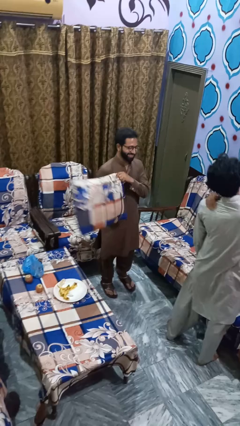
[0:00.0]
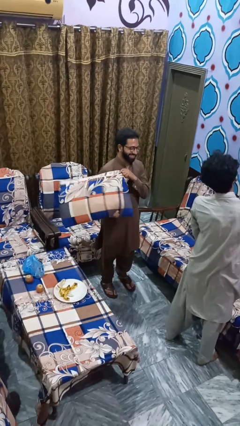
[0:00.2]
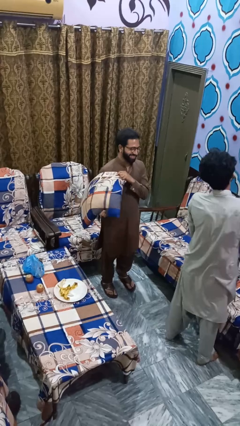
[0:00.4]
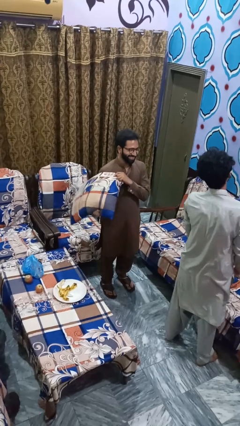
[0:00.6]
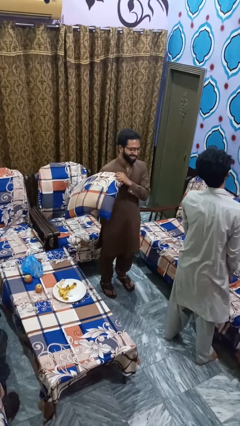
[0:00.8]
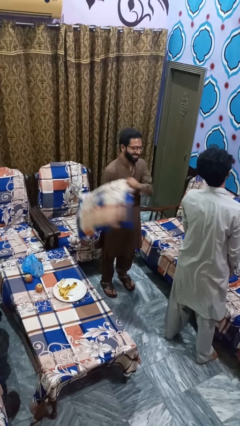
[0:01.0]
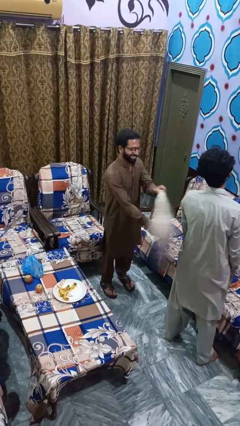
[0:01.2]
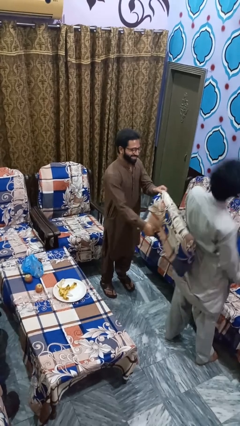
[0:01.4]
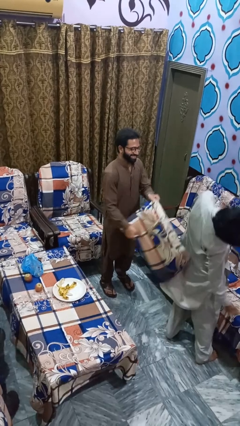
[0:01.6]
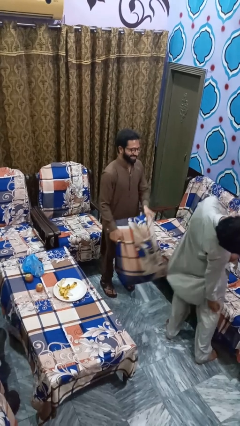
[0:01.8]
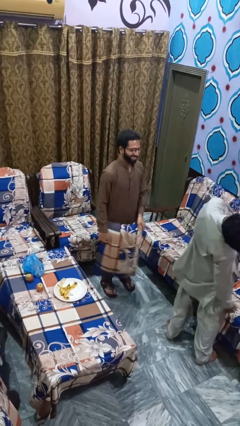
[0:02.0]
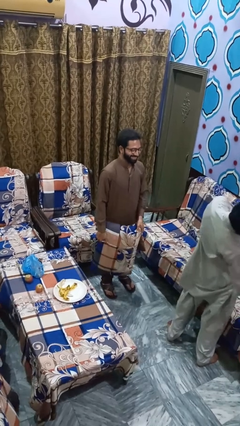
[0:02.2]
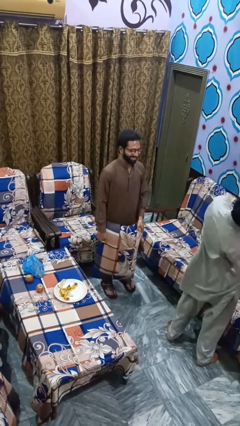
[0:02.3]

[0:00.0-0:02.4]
person hits person with pillow

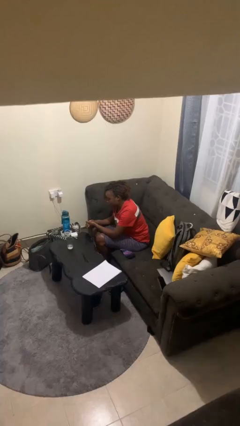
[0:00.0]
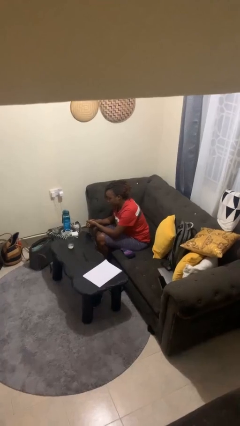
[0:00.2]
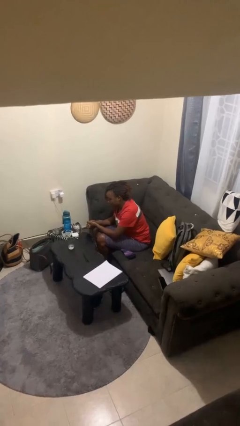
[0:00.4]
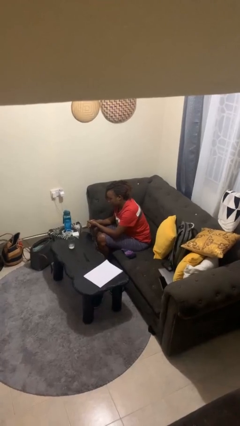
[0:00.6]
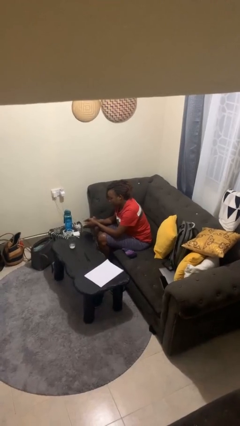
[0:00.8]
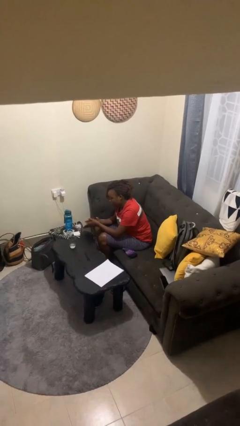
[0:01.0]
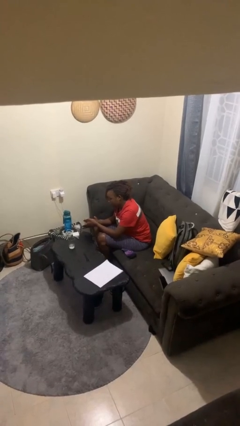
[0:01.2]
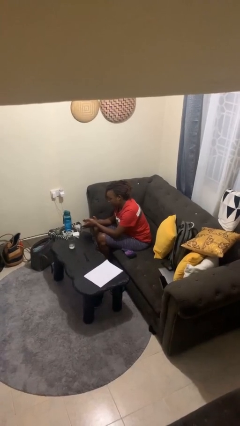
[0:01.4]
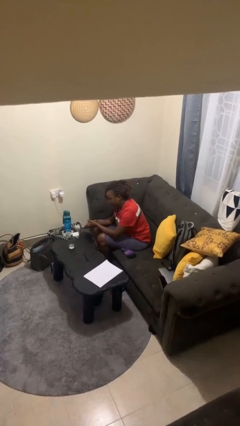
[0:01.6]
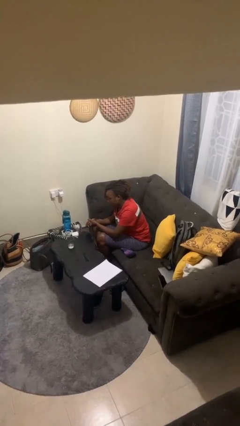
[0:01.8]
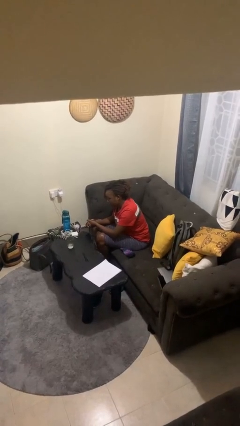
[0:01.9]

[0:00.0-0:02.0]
person claps hands

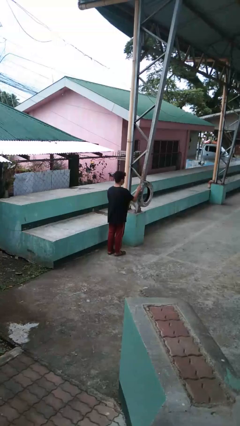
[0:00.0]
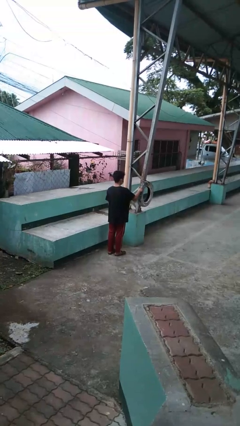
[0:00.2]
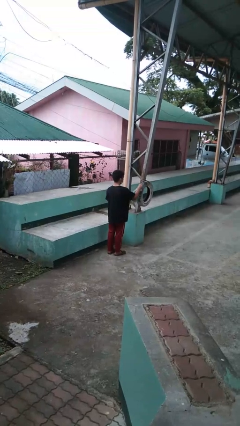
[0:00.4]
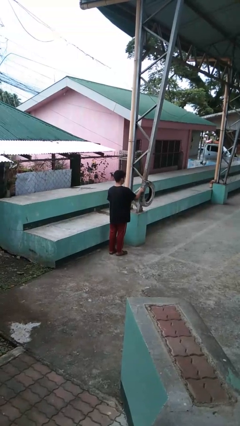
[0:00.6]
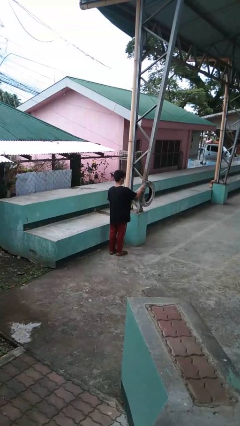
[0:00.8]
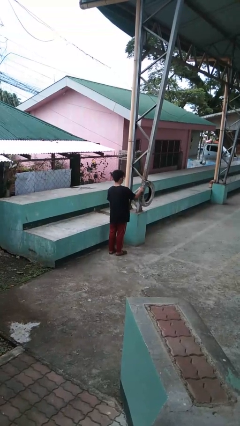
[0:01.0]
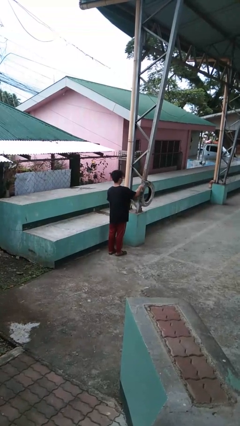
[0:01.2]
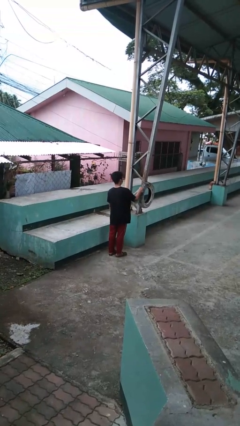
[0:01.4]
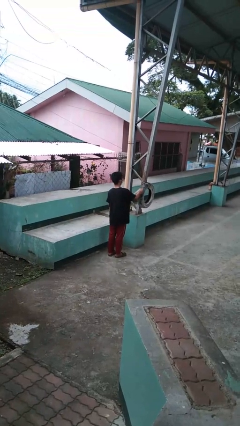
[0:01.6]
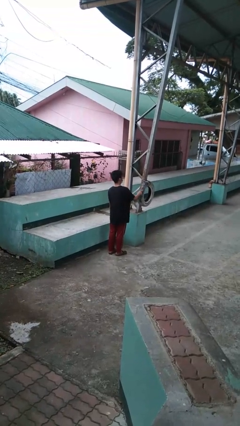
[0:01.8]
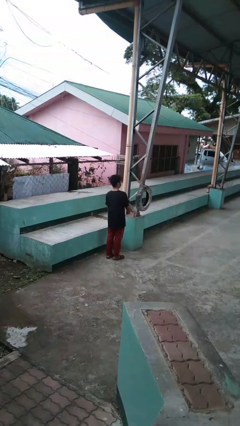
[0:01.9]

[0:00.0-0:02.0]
person taps object with finger

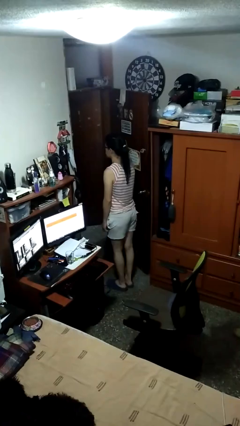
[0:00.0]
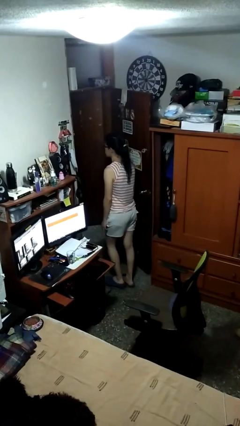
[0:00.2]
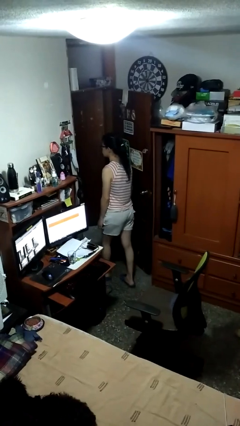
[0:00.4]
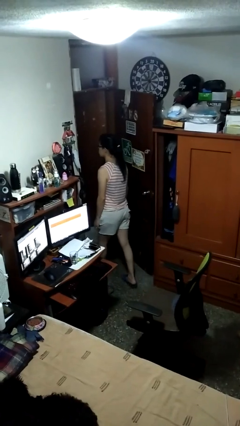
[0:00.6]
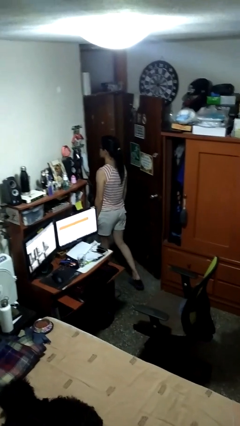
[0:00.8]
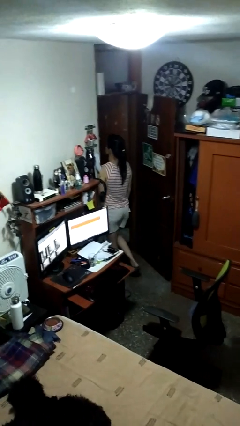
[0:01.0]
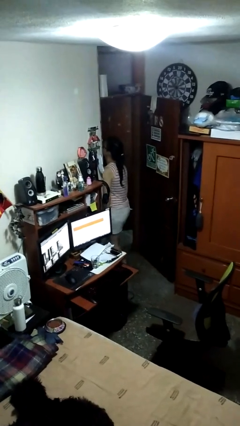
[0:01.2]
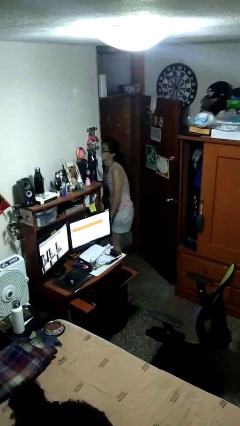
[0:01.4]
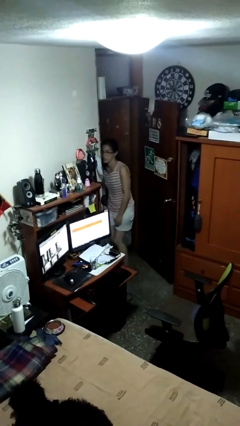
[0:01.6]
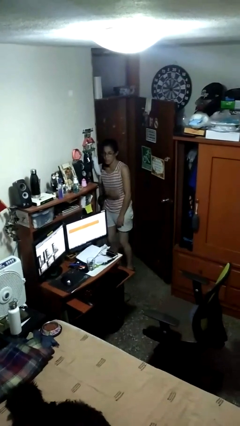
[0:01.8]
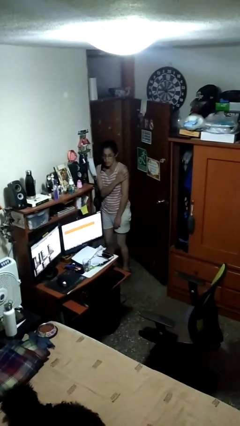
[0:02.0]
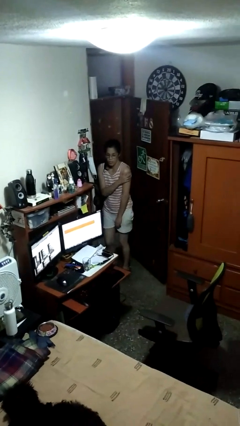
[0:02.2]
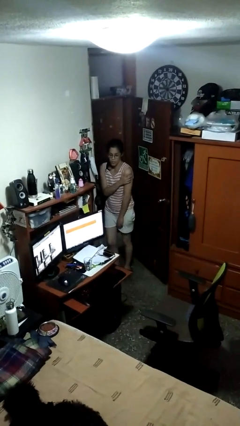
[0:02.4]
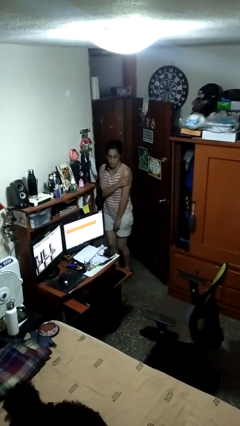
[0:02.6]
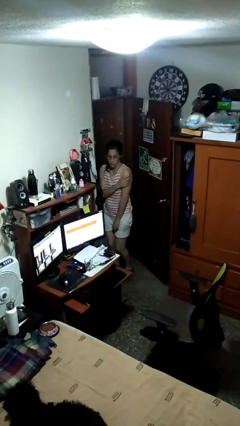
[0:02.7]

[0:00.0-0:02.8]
person bumps into wall

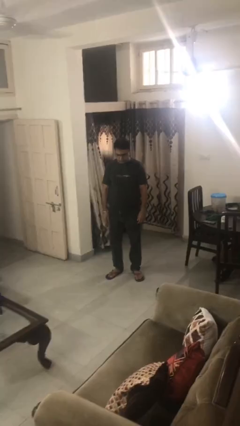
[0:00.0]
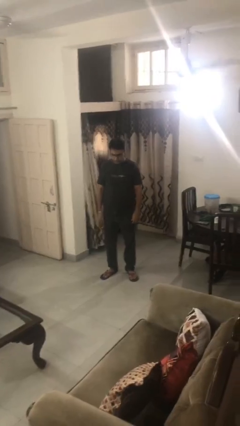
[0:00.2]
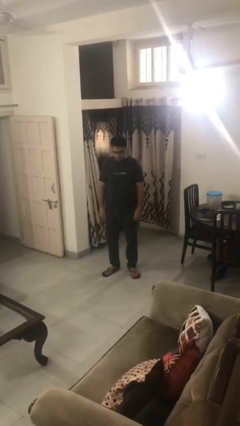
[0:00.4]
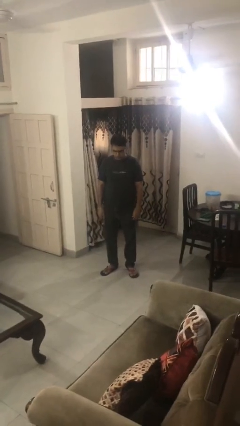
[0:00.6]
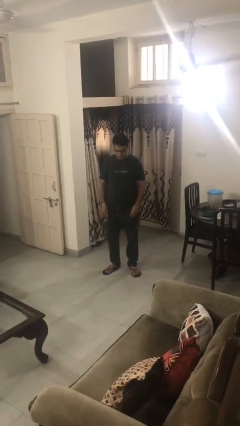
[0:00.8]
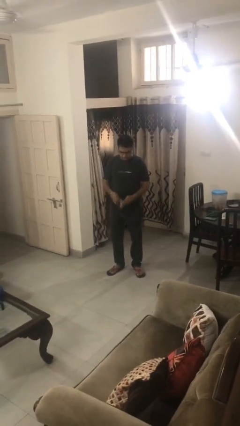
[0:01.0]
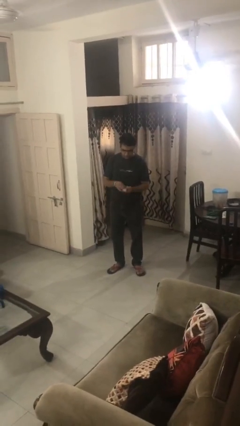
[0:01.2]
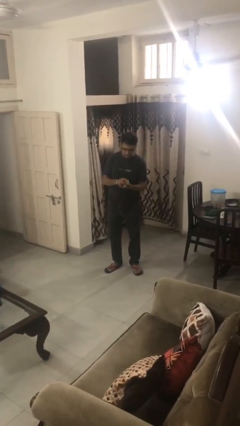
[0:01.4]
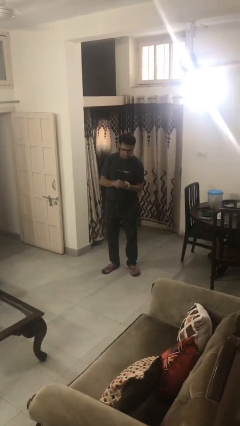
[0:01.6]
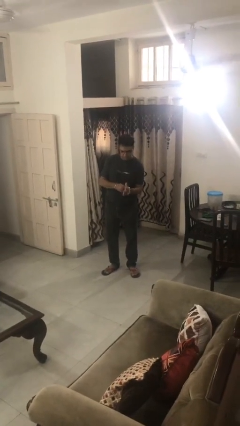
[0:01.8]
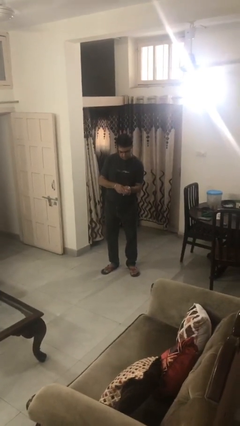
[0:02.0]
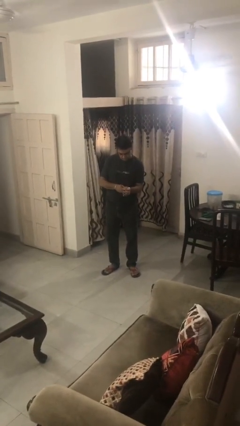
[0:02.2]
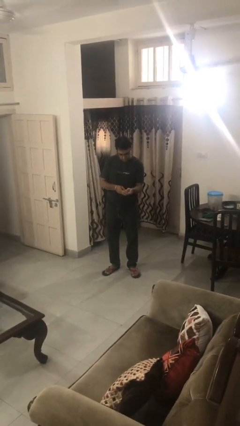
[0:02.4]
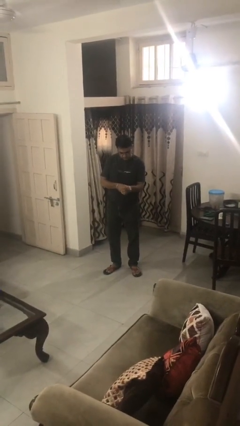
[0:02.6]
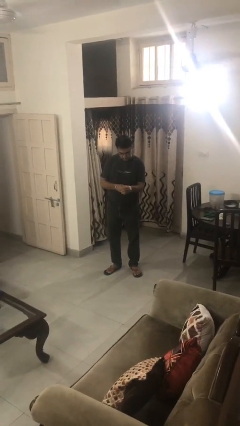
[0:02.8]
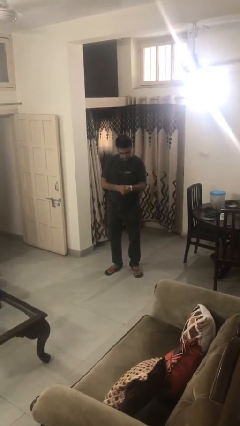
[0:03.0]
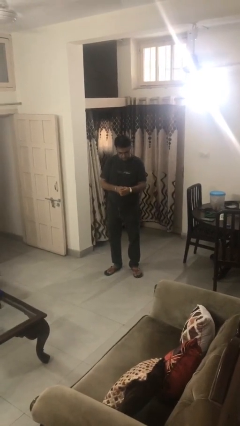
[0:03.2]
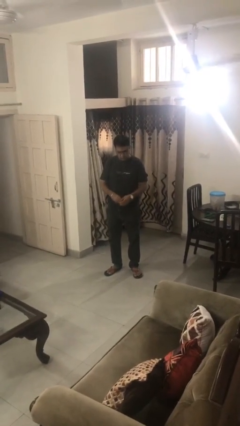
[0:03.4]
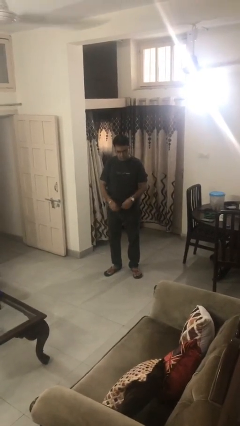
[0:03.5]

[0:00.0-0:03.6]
person puts on wristwatch

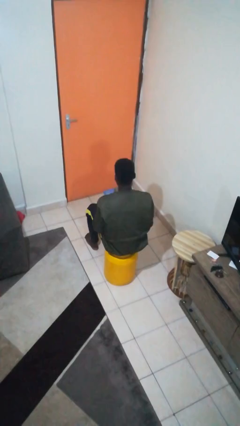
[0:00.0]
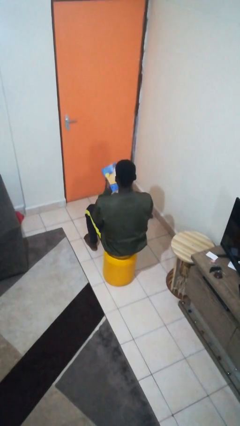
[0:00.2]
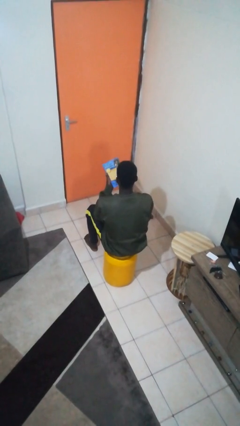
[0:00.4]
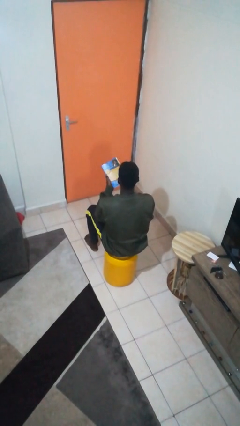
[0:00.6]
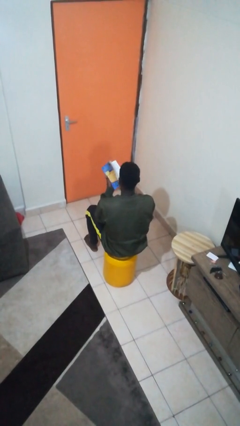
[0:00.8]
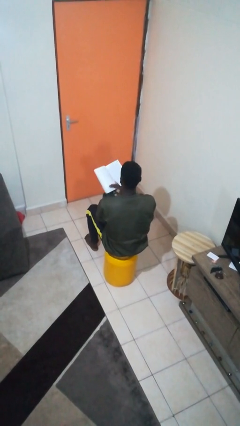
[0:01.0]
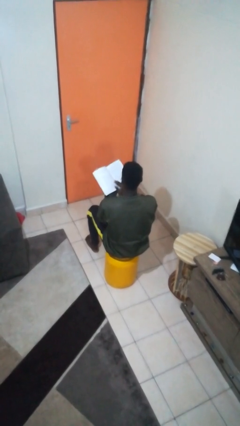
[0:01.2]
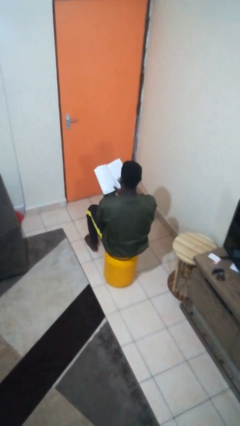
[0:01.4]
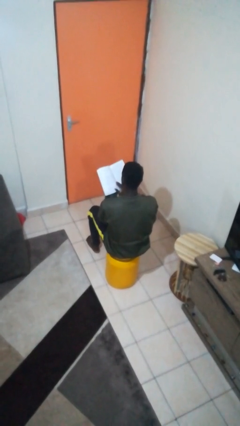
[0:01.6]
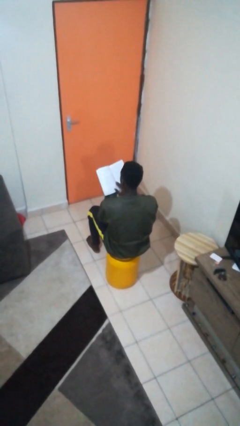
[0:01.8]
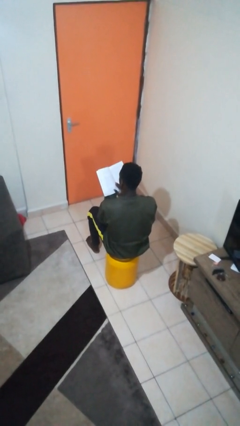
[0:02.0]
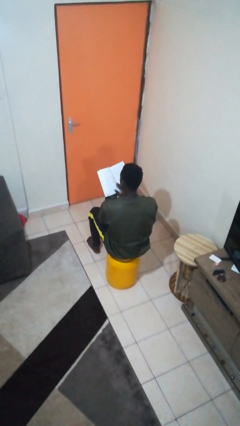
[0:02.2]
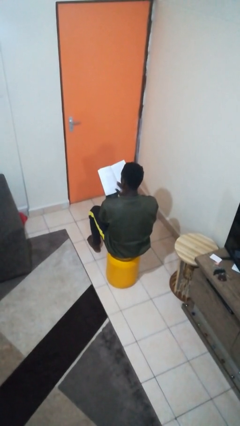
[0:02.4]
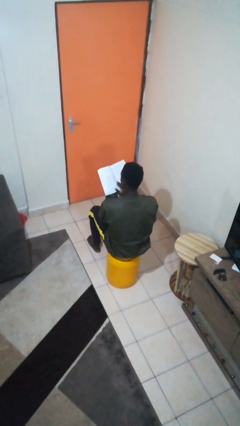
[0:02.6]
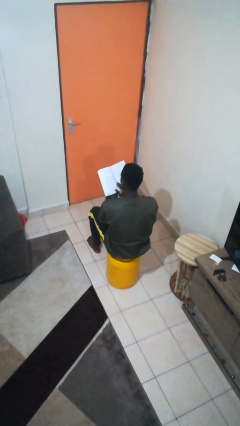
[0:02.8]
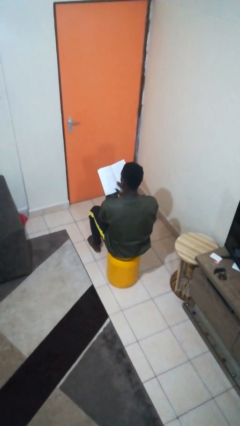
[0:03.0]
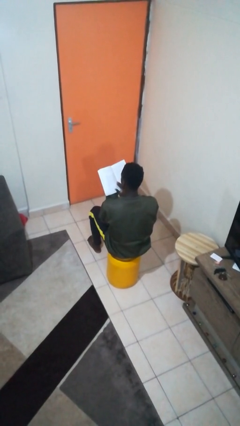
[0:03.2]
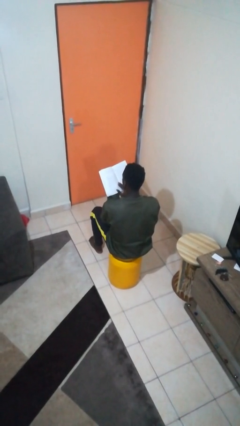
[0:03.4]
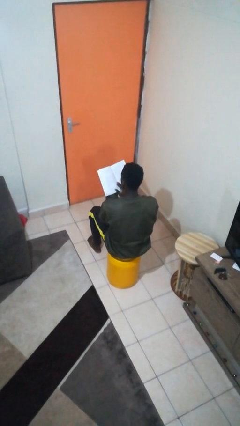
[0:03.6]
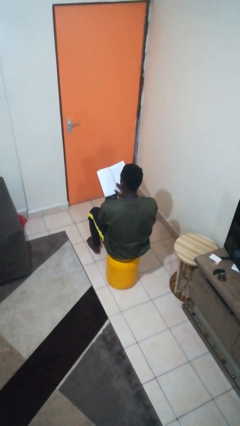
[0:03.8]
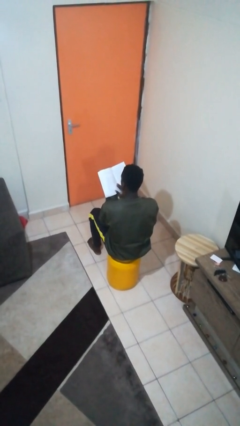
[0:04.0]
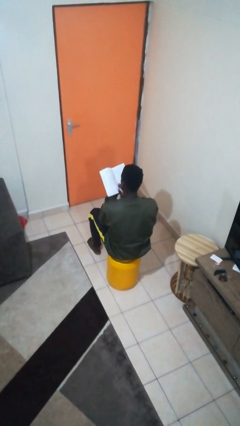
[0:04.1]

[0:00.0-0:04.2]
person reads book
